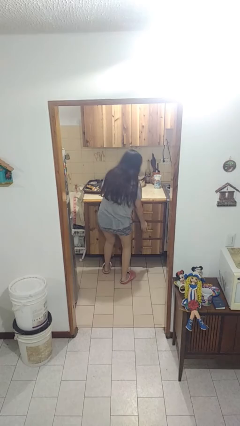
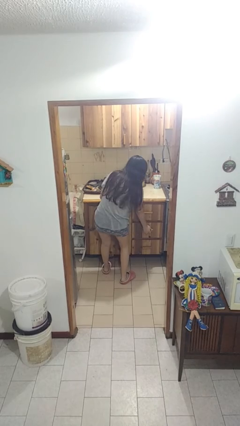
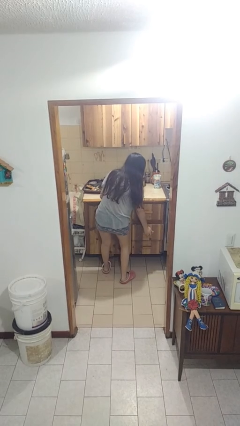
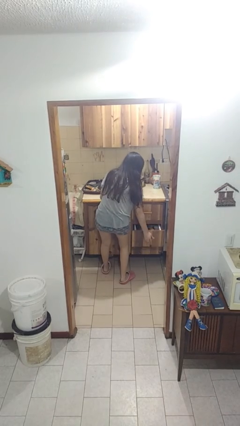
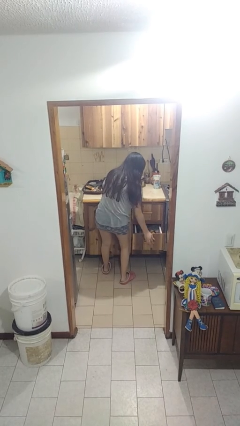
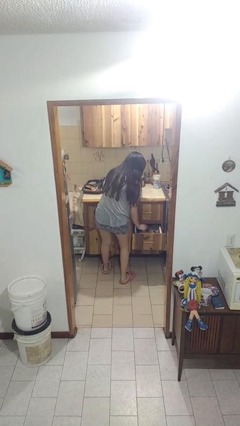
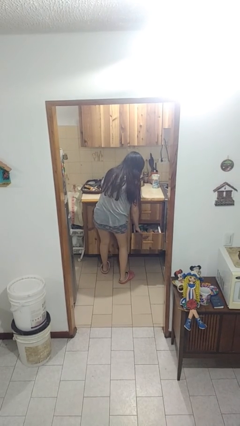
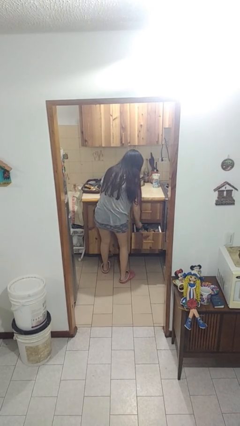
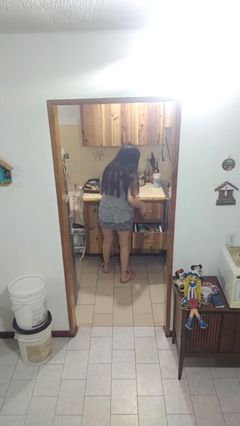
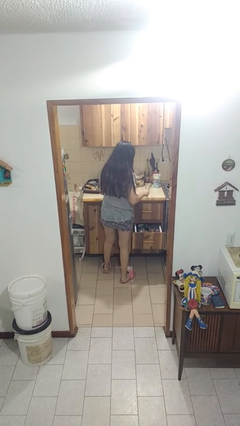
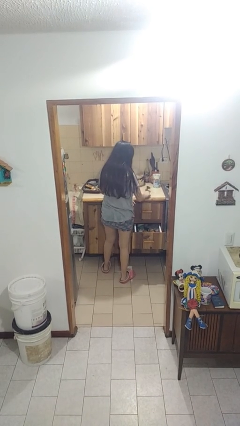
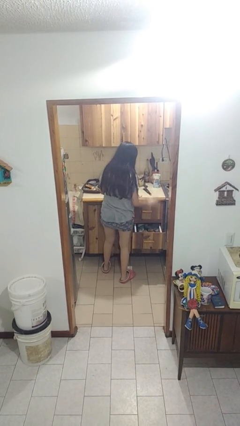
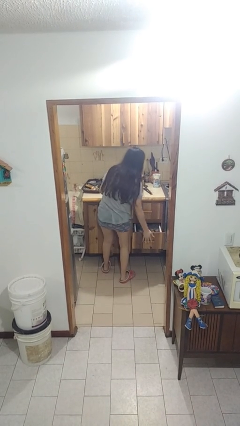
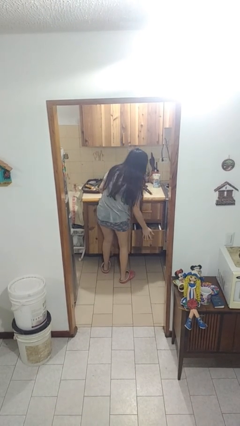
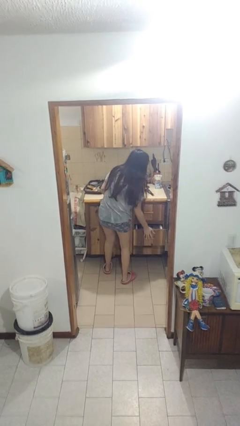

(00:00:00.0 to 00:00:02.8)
person takes object from kitchen drawer

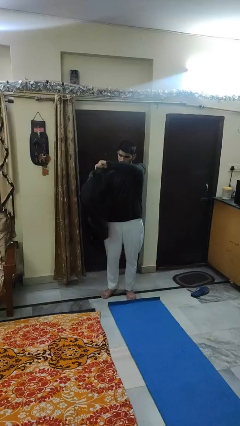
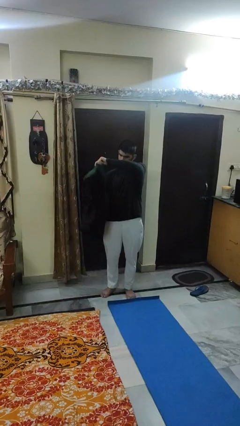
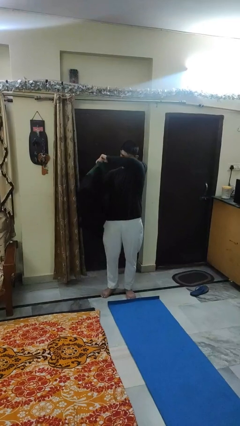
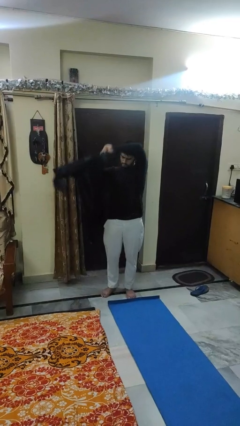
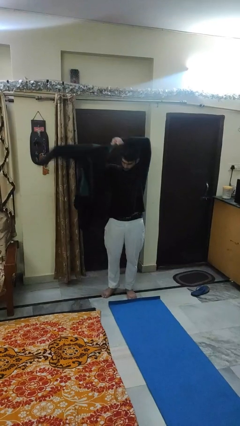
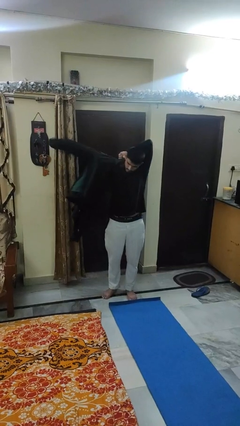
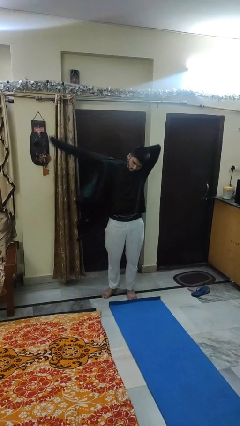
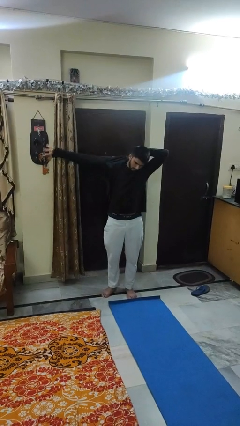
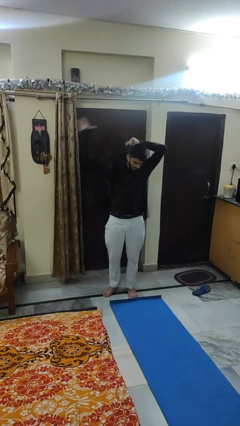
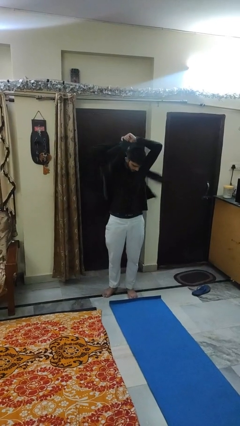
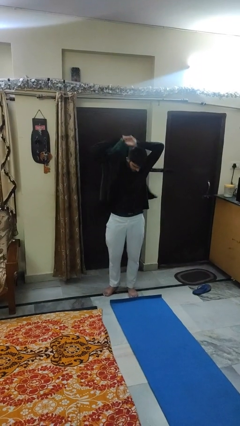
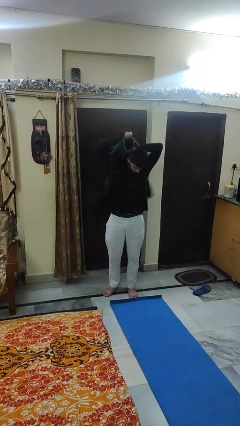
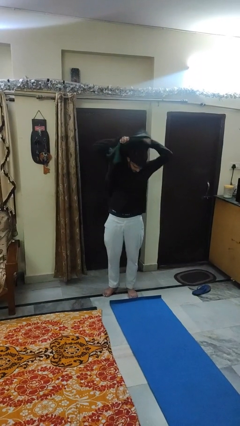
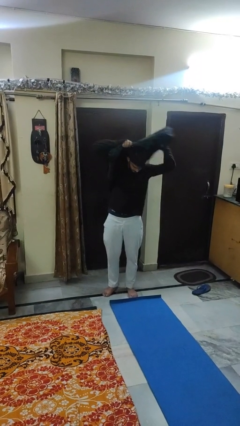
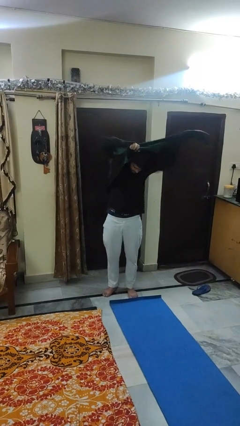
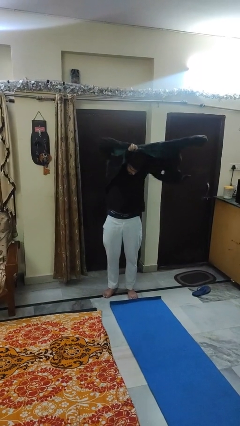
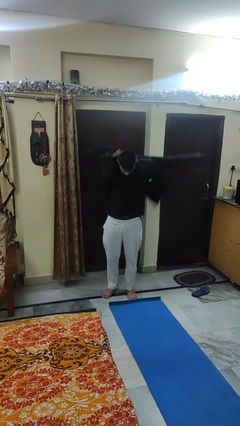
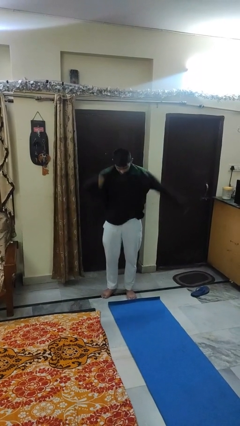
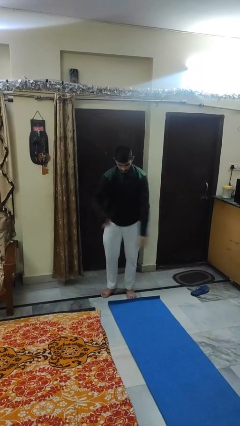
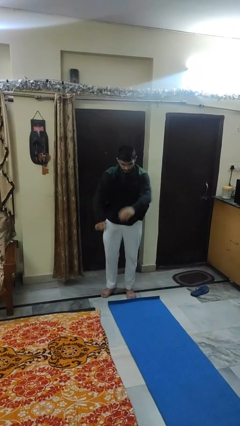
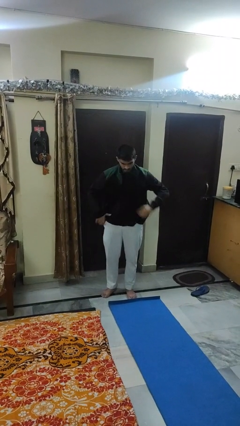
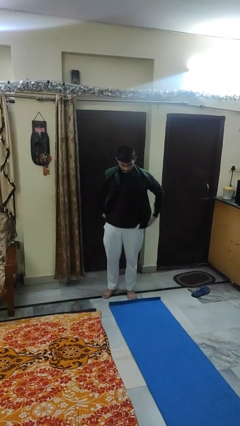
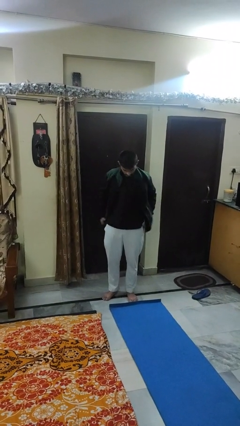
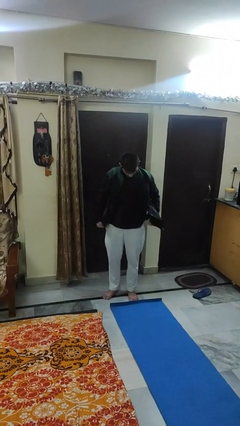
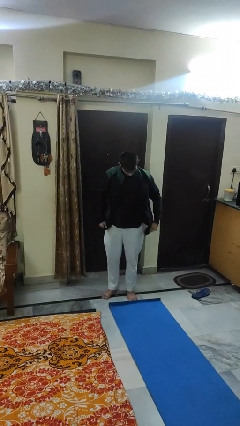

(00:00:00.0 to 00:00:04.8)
person puts on jacket

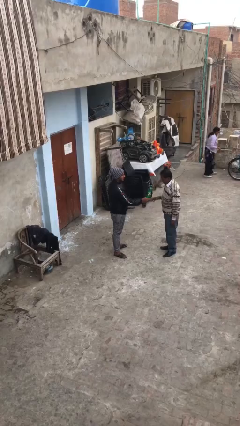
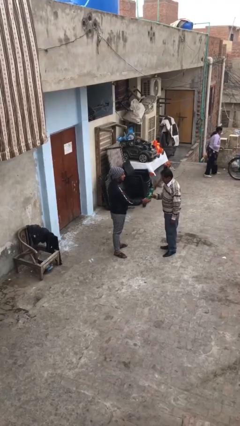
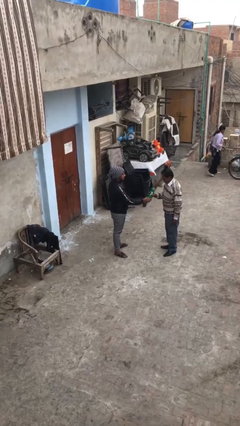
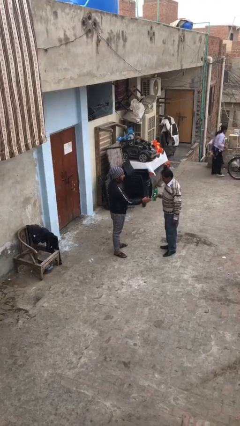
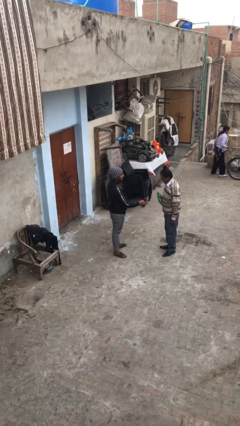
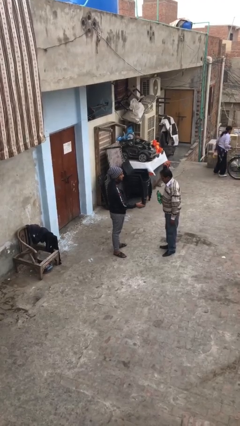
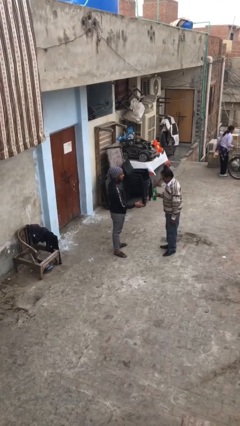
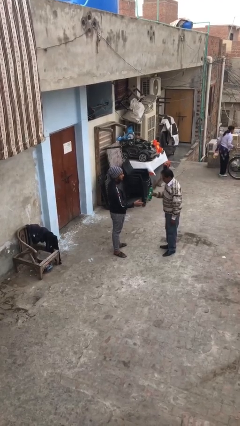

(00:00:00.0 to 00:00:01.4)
person transfers object to person

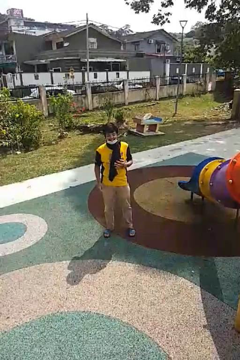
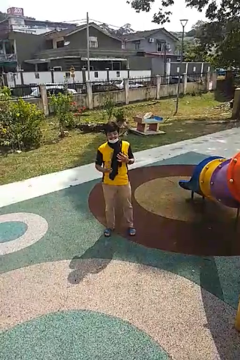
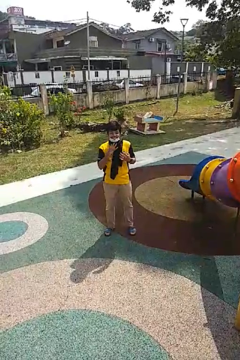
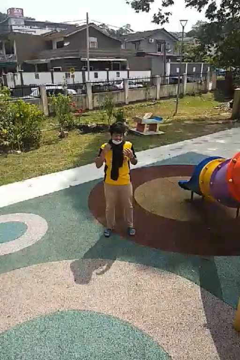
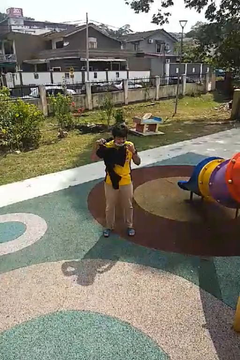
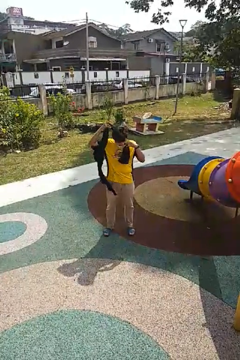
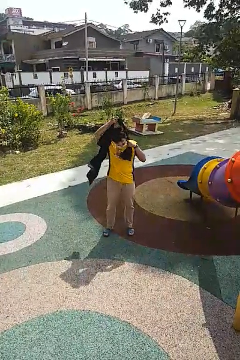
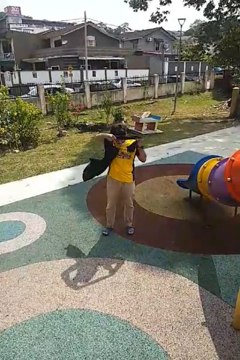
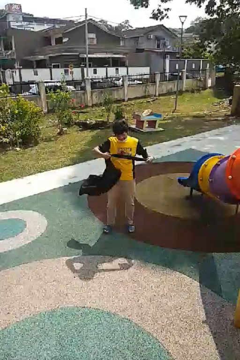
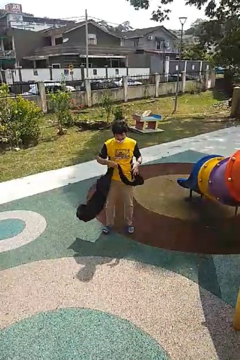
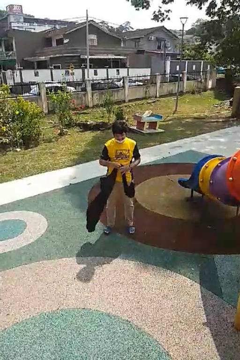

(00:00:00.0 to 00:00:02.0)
person takes off scarf

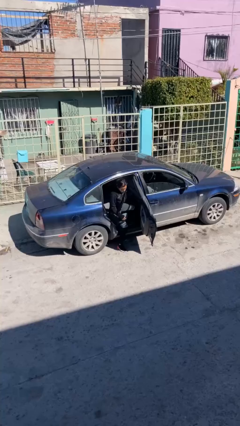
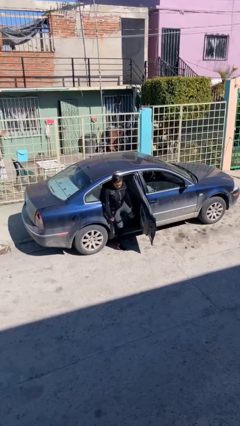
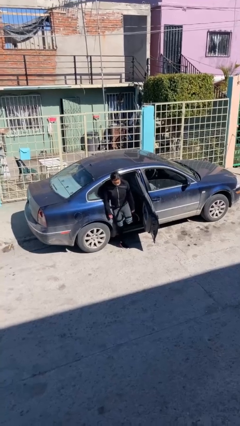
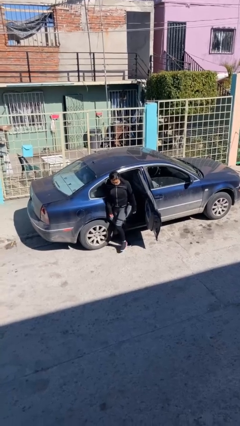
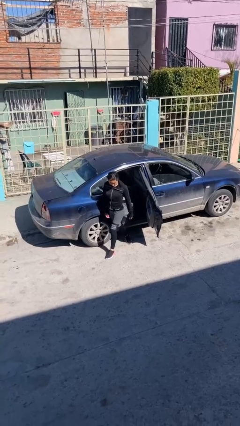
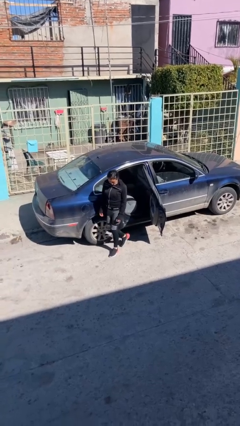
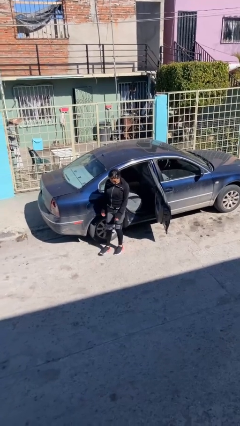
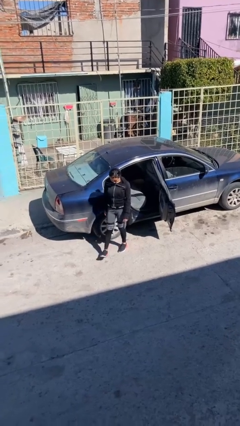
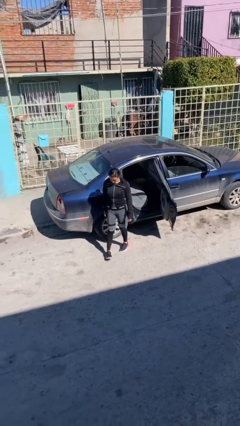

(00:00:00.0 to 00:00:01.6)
person exits car

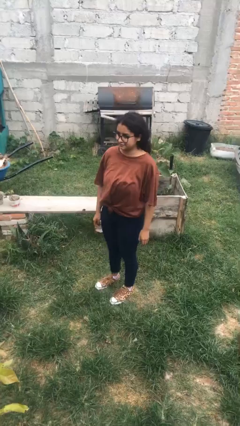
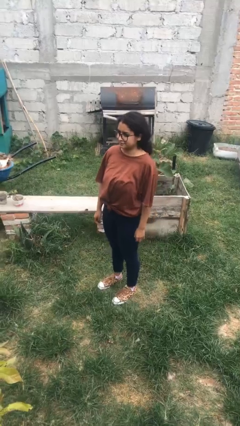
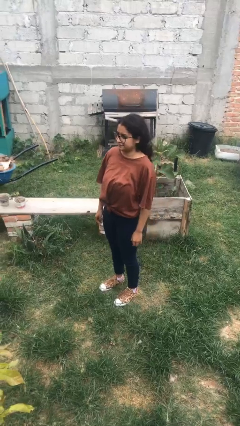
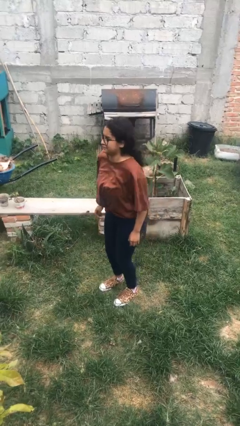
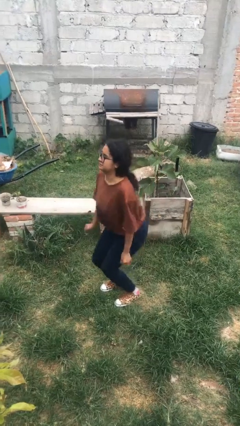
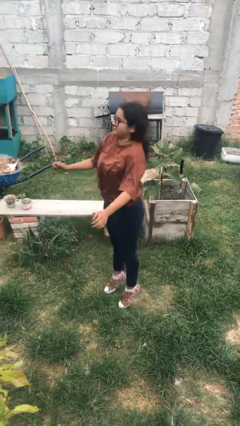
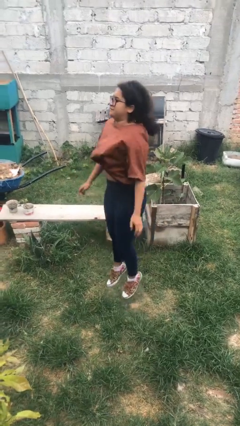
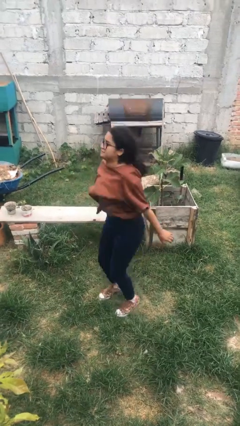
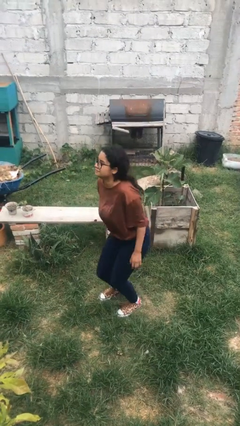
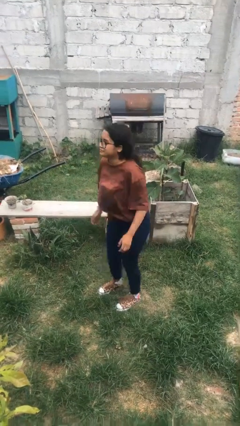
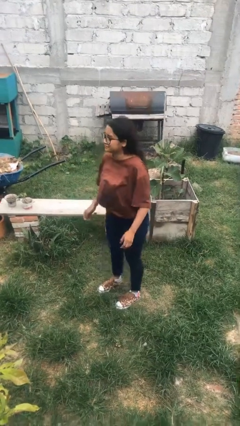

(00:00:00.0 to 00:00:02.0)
person jumps

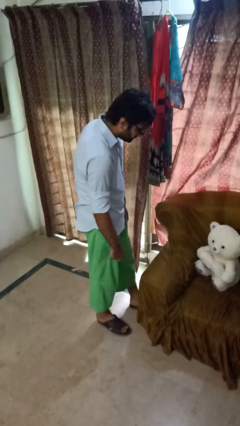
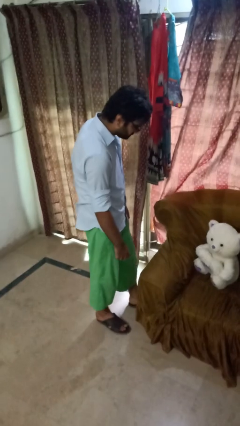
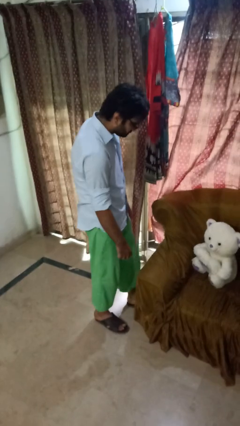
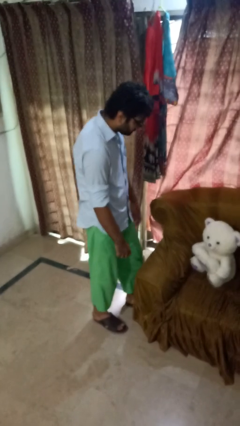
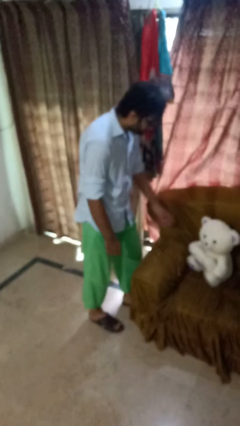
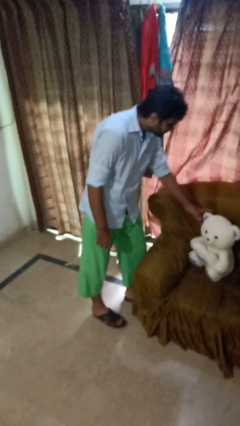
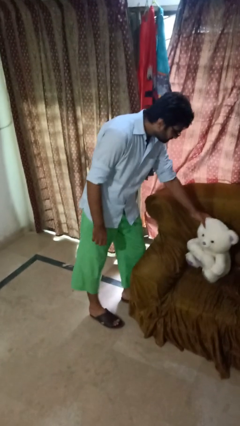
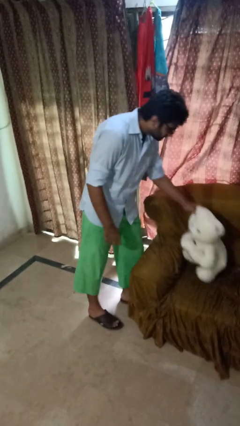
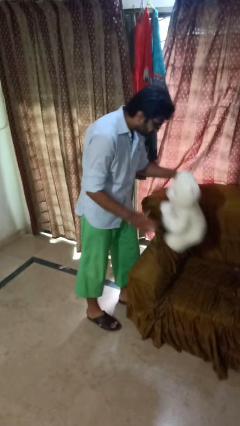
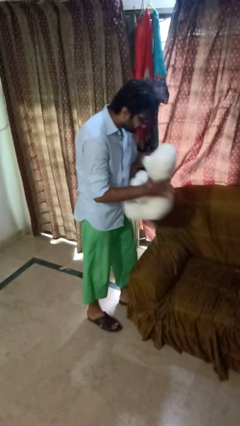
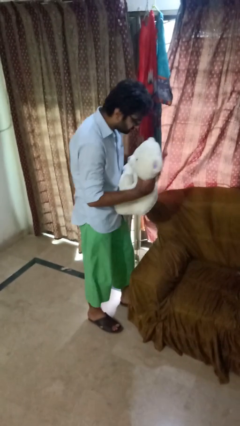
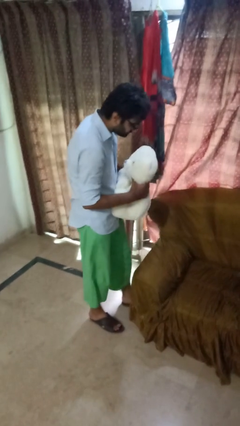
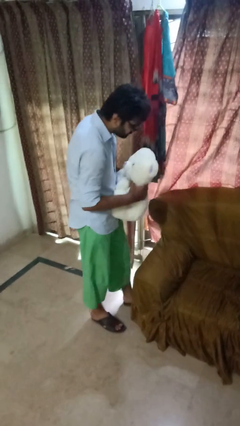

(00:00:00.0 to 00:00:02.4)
person picks up object from couch
